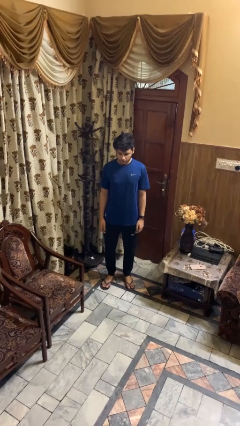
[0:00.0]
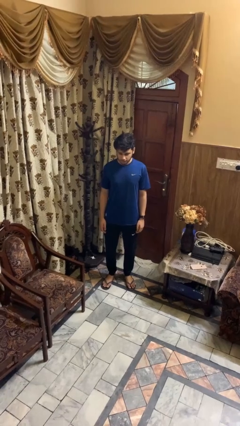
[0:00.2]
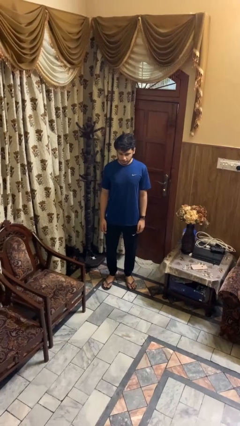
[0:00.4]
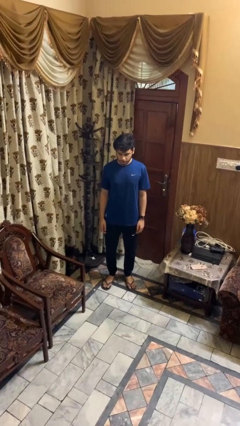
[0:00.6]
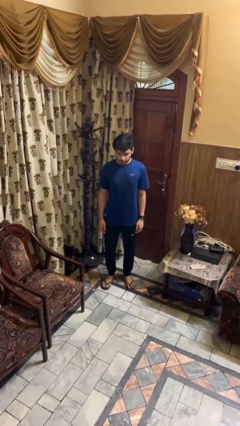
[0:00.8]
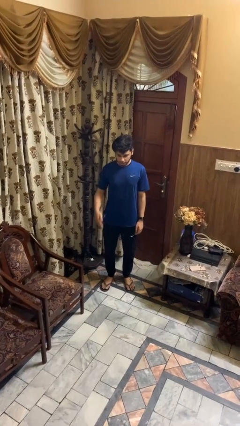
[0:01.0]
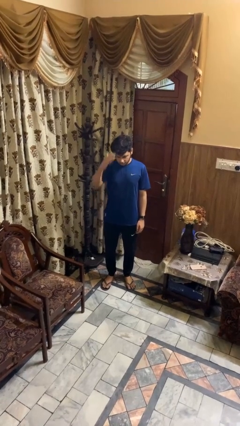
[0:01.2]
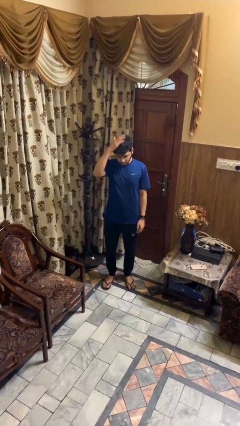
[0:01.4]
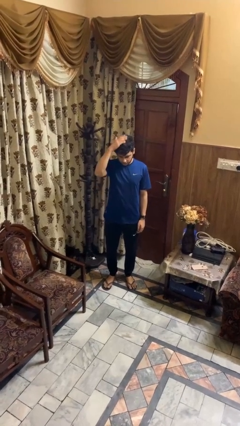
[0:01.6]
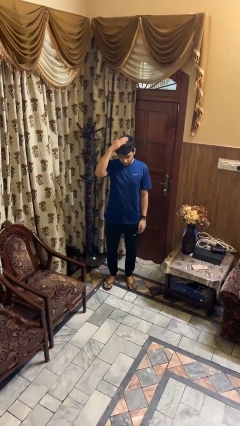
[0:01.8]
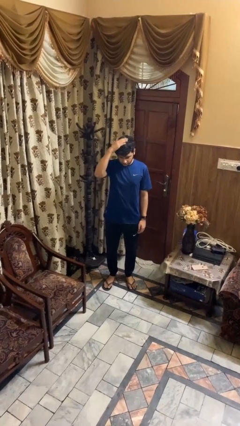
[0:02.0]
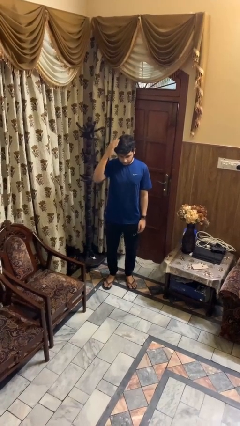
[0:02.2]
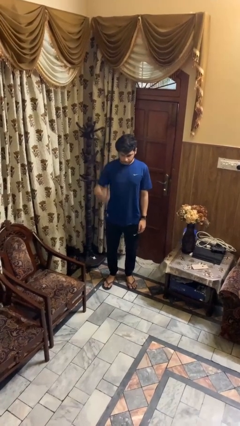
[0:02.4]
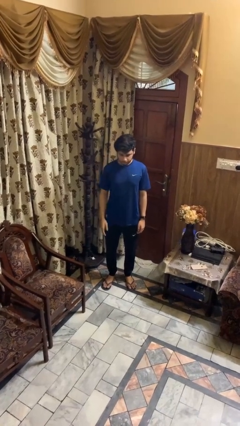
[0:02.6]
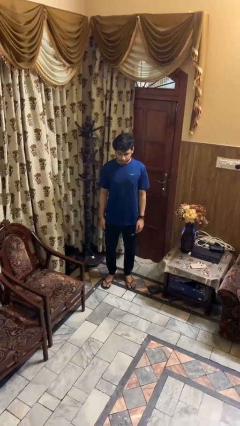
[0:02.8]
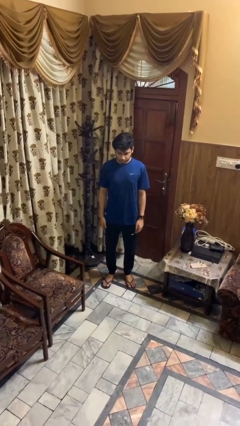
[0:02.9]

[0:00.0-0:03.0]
person pats head

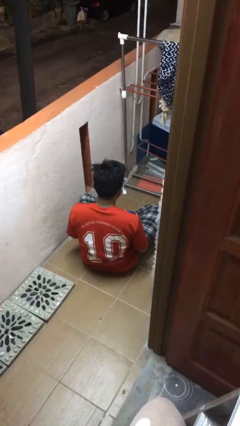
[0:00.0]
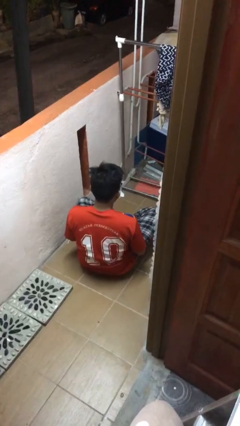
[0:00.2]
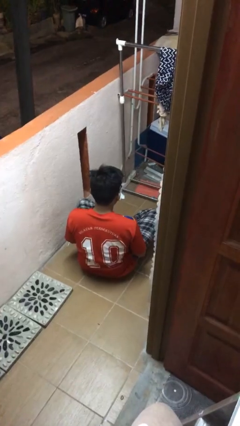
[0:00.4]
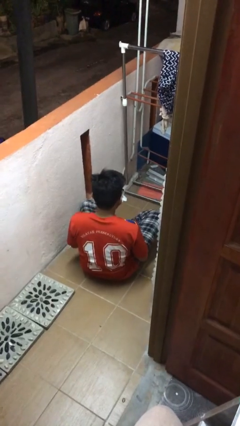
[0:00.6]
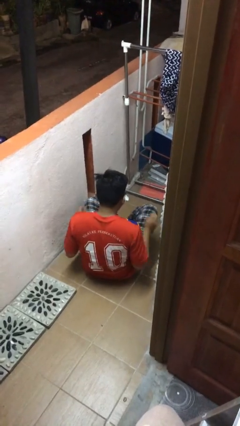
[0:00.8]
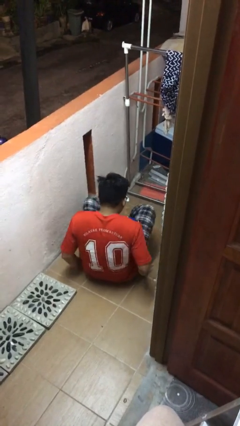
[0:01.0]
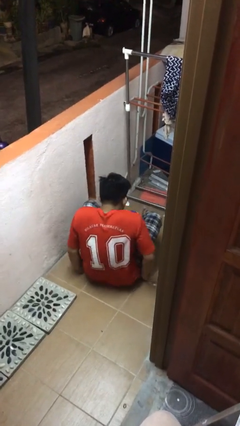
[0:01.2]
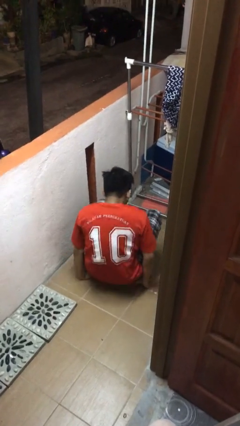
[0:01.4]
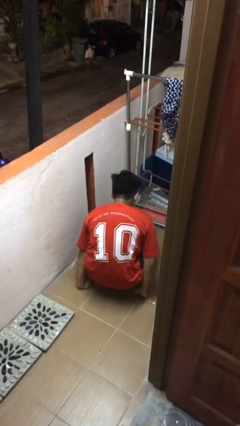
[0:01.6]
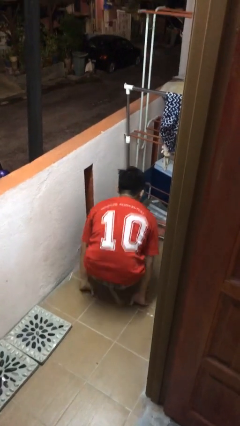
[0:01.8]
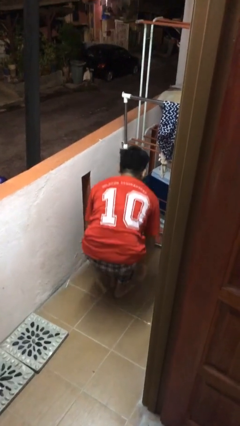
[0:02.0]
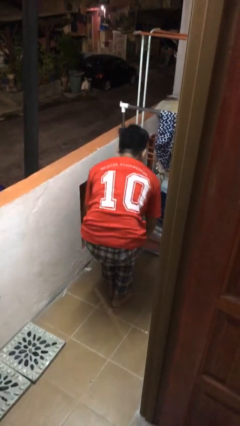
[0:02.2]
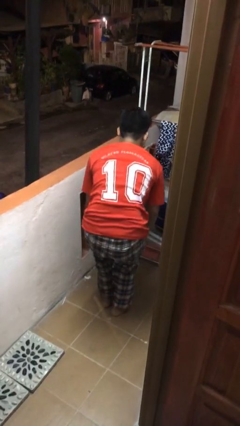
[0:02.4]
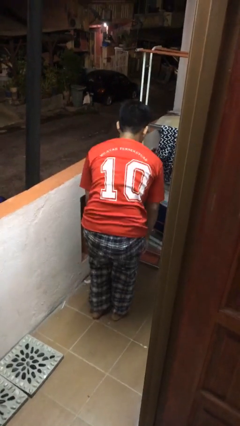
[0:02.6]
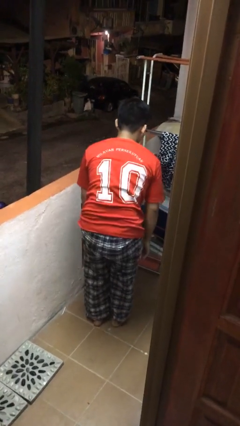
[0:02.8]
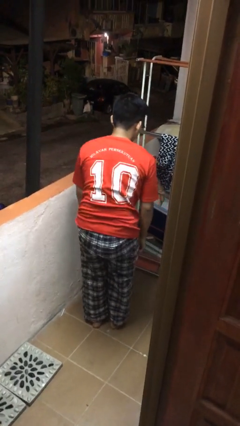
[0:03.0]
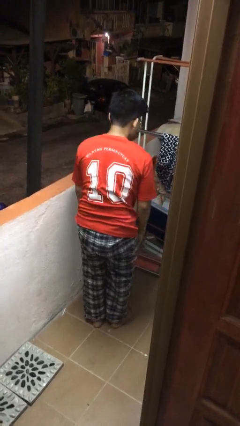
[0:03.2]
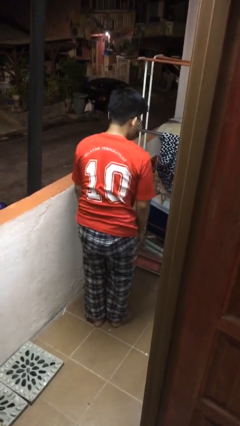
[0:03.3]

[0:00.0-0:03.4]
person stands up from floor

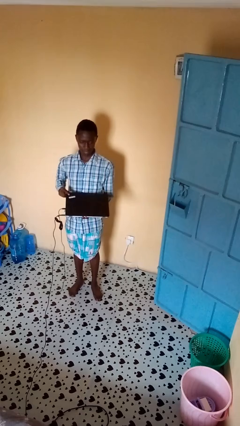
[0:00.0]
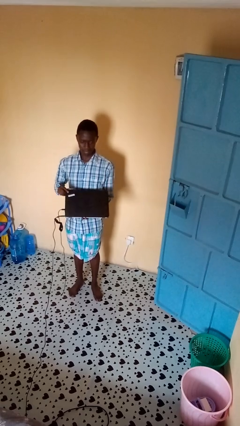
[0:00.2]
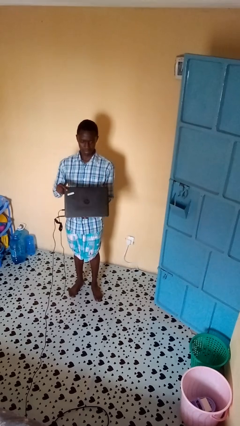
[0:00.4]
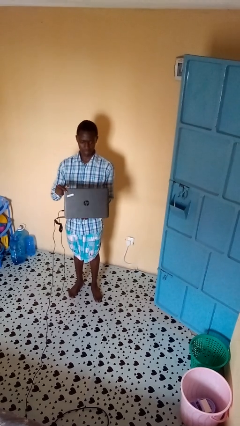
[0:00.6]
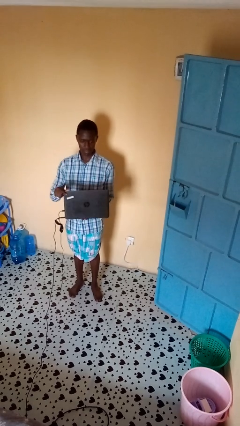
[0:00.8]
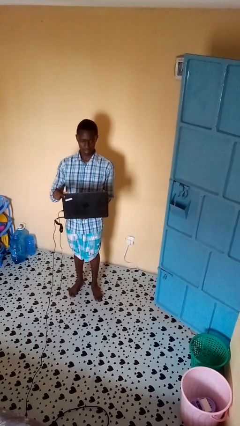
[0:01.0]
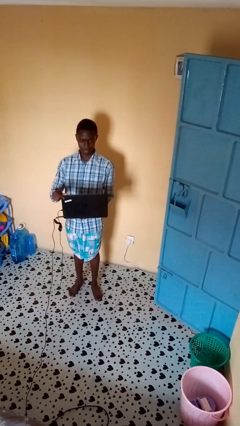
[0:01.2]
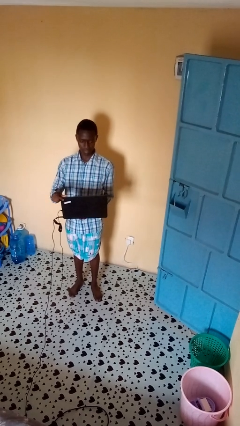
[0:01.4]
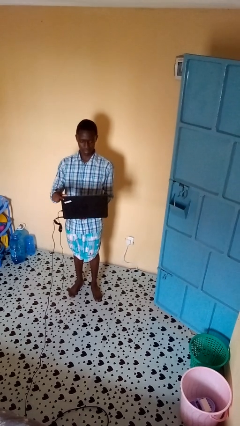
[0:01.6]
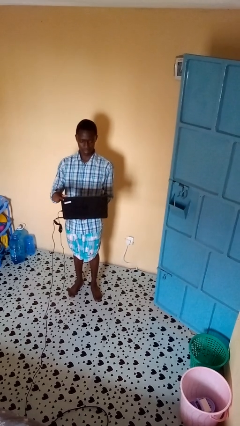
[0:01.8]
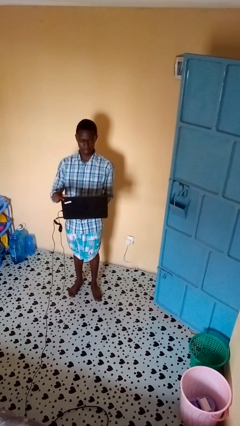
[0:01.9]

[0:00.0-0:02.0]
person opens laptop

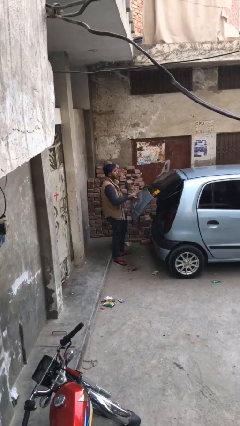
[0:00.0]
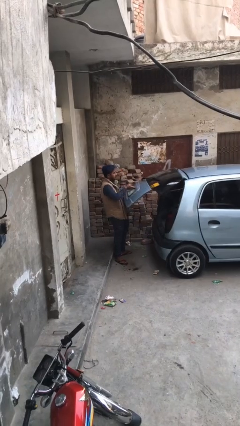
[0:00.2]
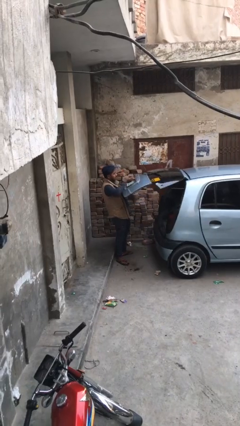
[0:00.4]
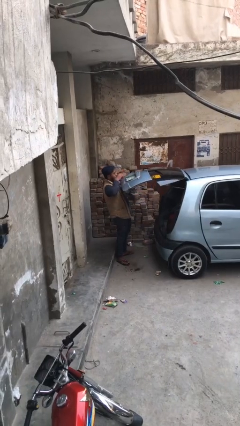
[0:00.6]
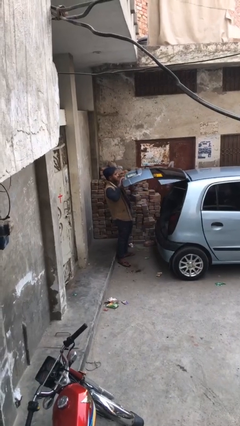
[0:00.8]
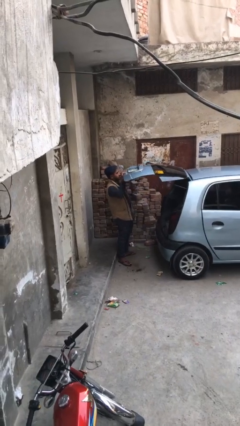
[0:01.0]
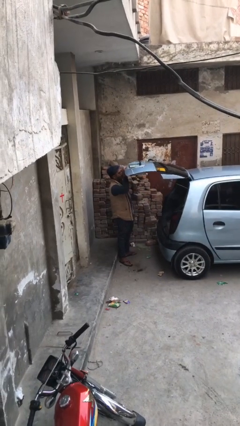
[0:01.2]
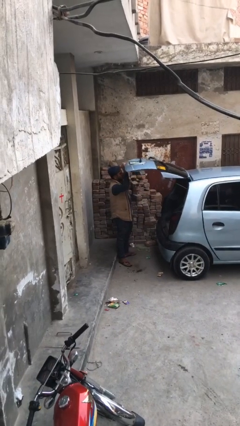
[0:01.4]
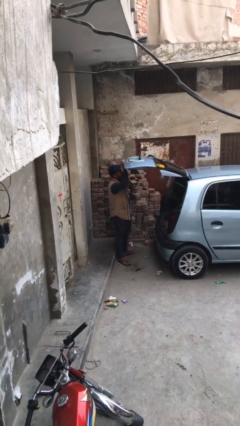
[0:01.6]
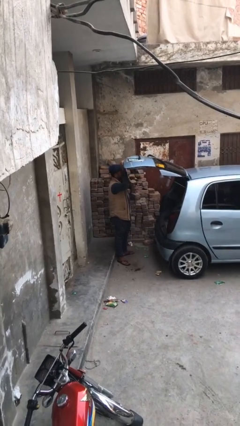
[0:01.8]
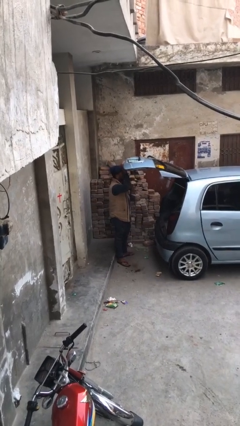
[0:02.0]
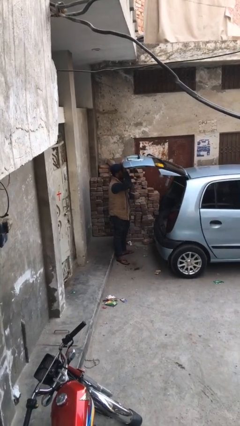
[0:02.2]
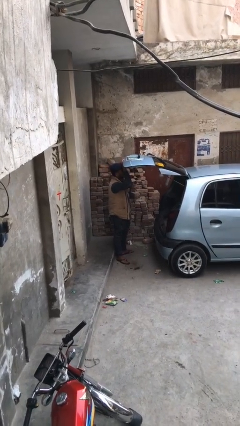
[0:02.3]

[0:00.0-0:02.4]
person opens car trunk

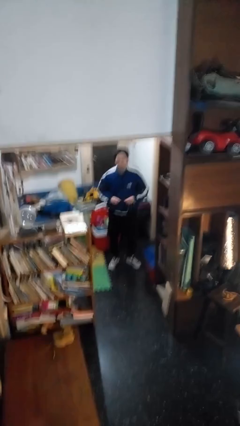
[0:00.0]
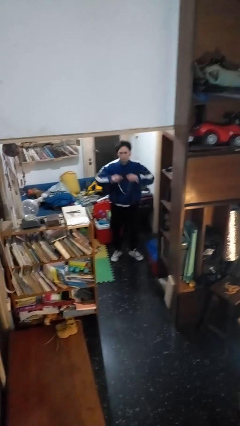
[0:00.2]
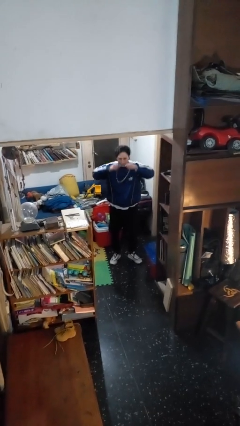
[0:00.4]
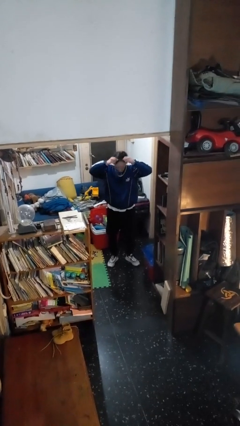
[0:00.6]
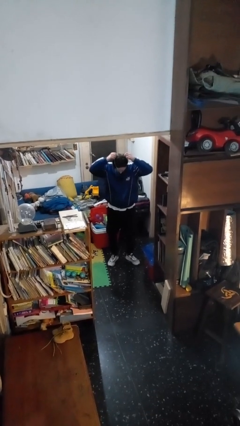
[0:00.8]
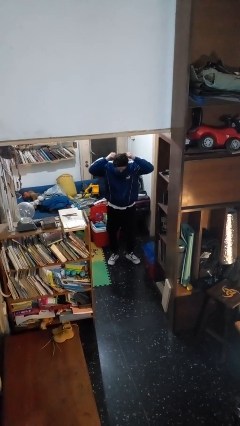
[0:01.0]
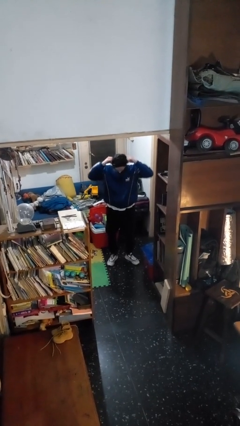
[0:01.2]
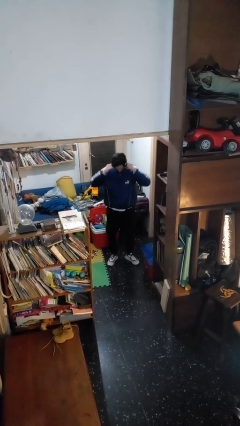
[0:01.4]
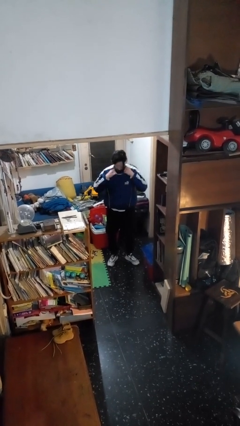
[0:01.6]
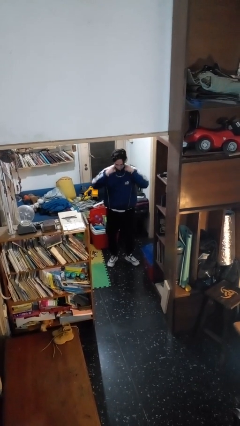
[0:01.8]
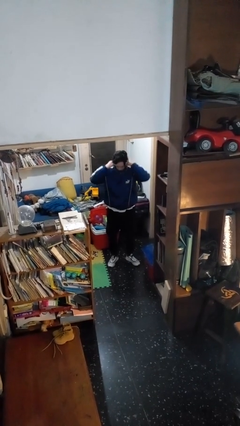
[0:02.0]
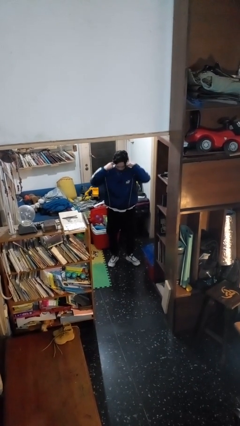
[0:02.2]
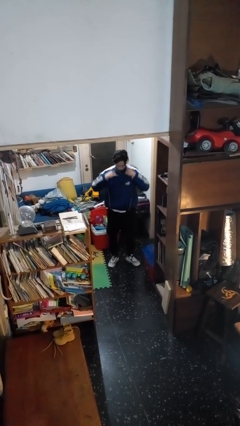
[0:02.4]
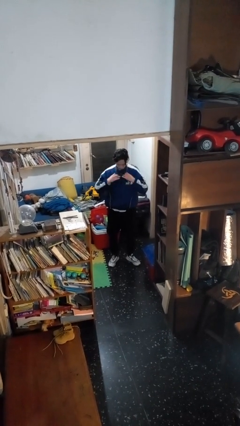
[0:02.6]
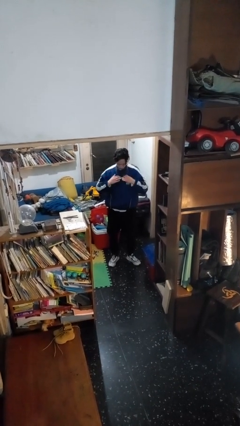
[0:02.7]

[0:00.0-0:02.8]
person puts on necklace

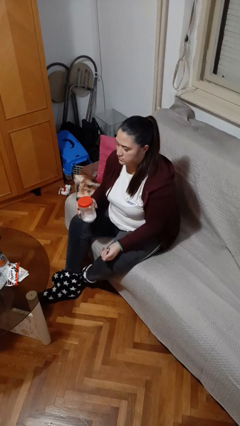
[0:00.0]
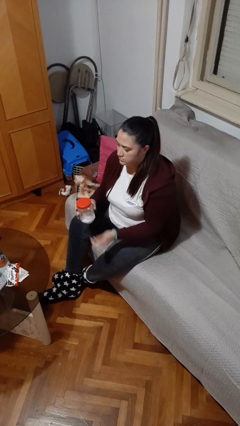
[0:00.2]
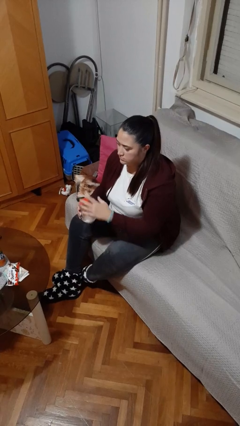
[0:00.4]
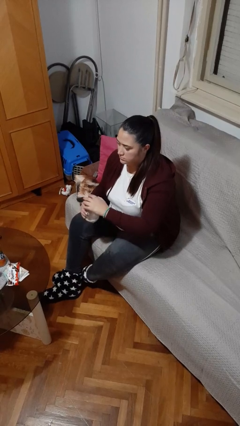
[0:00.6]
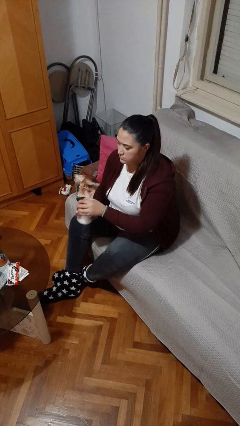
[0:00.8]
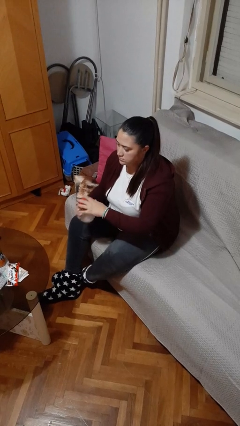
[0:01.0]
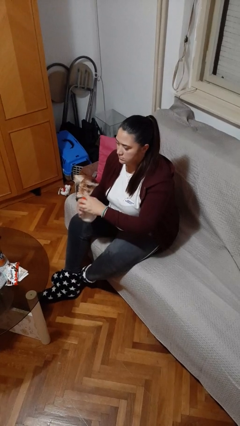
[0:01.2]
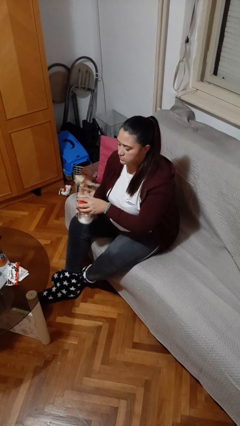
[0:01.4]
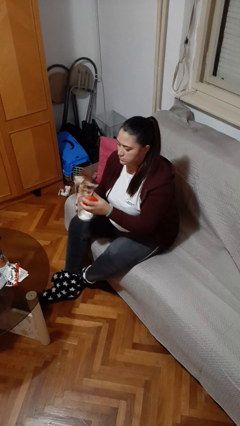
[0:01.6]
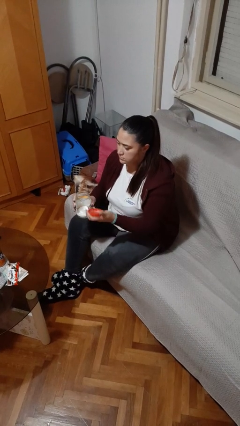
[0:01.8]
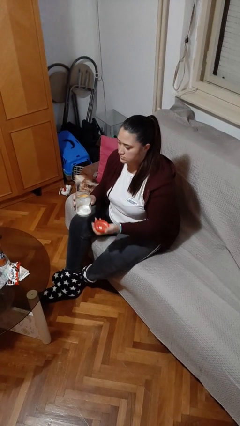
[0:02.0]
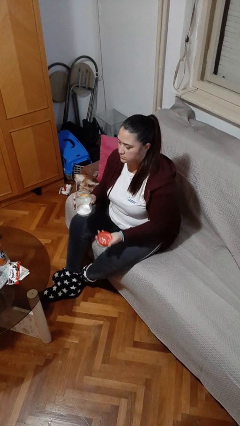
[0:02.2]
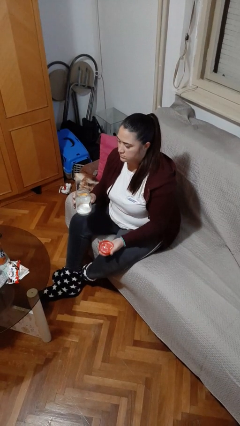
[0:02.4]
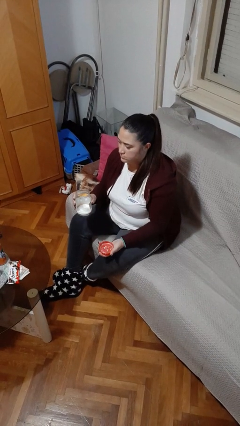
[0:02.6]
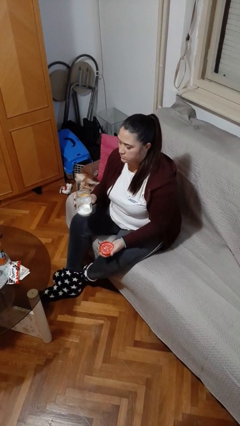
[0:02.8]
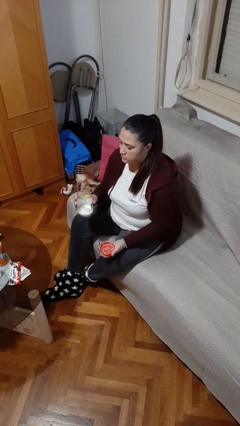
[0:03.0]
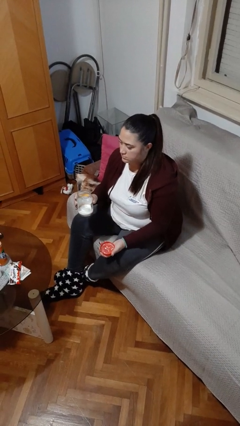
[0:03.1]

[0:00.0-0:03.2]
person opens jar

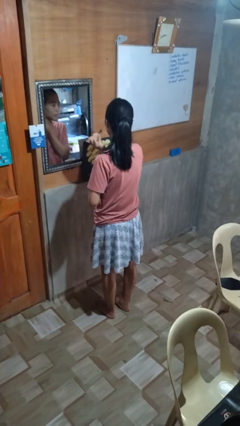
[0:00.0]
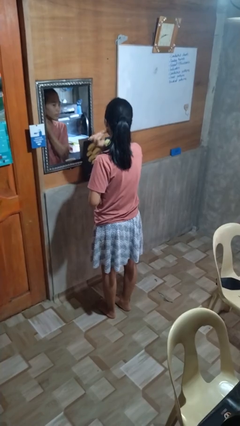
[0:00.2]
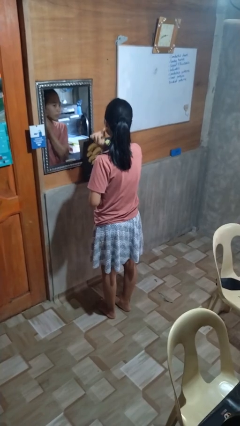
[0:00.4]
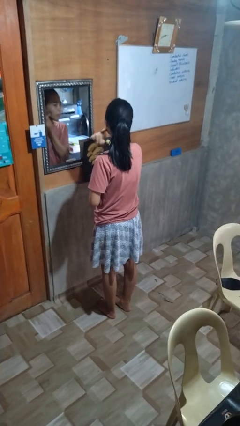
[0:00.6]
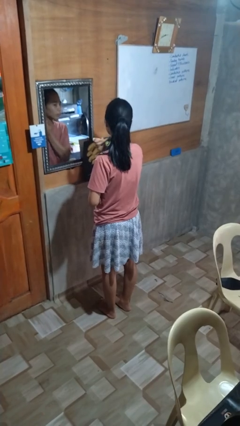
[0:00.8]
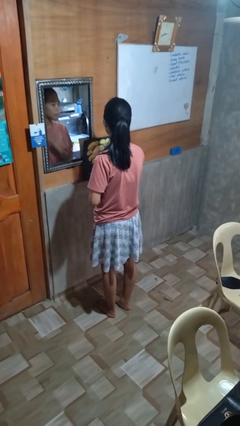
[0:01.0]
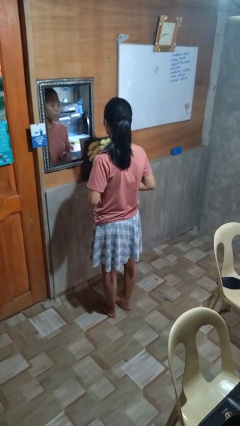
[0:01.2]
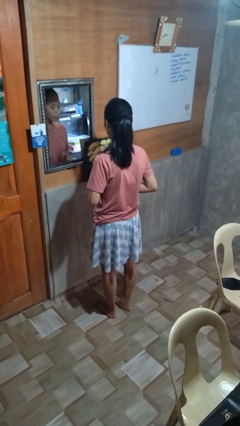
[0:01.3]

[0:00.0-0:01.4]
person applies foundation makeup
